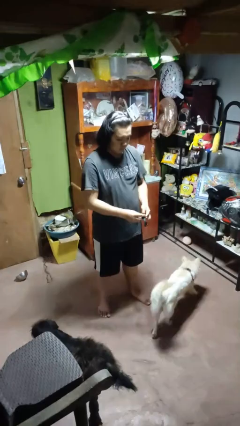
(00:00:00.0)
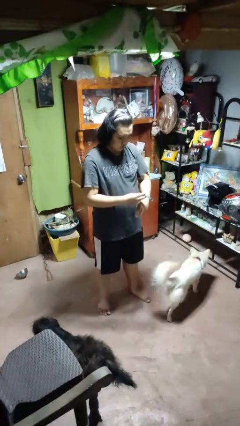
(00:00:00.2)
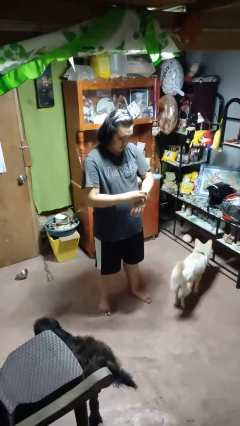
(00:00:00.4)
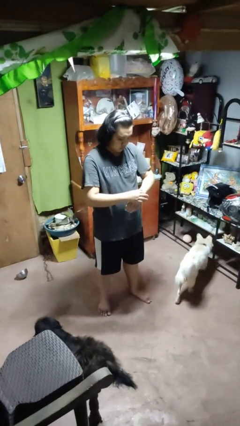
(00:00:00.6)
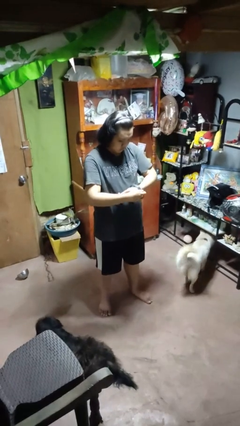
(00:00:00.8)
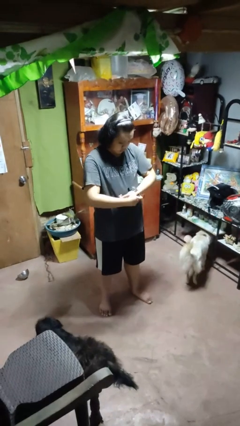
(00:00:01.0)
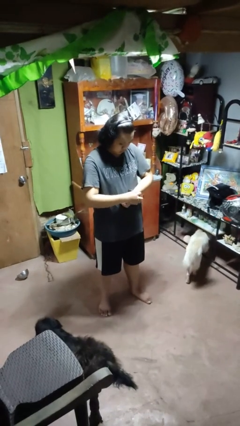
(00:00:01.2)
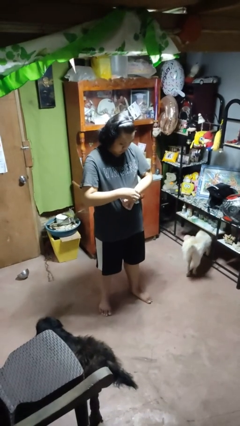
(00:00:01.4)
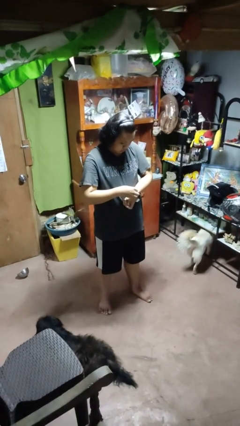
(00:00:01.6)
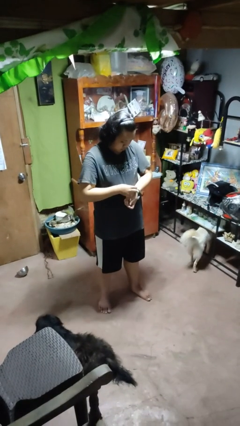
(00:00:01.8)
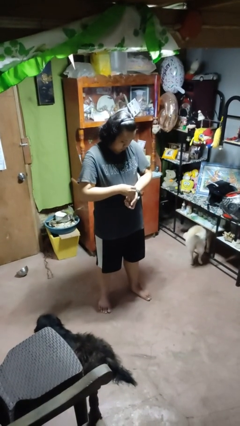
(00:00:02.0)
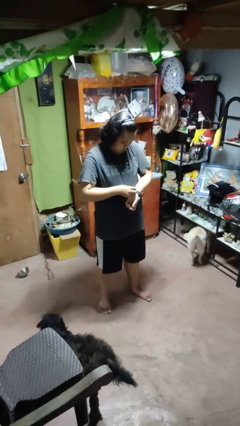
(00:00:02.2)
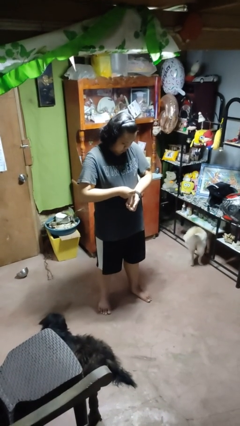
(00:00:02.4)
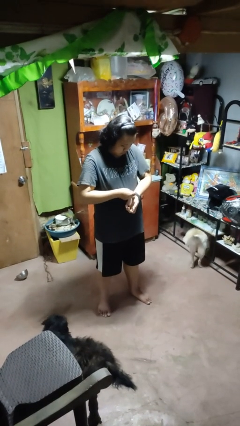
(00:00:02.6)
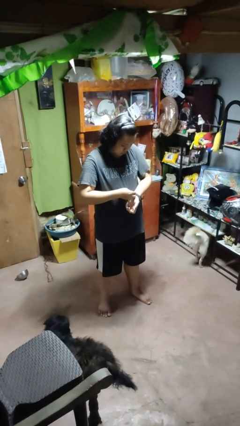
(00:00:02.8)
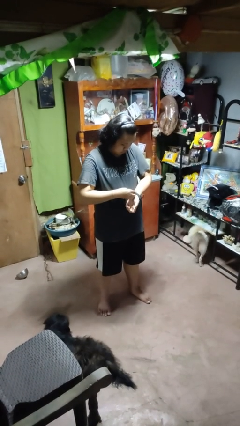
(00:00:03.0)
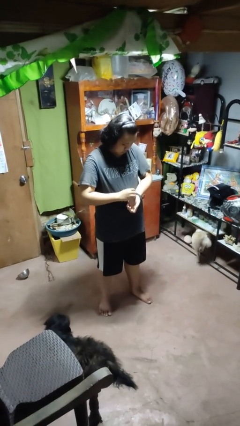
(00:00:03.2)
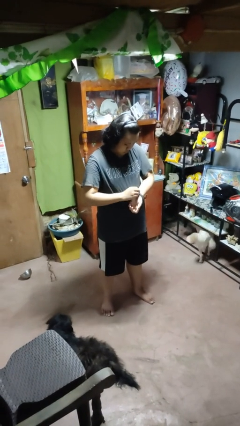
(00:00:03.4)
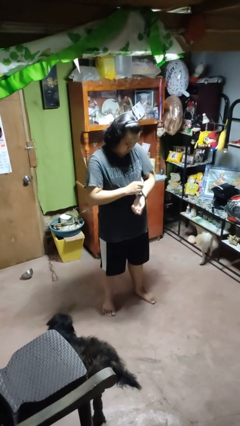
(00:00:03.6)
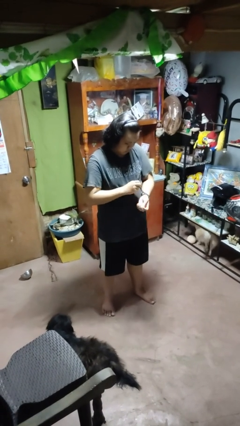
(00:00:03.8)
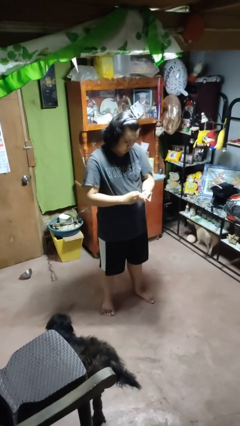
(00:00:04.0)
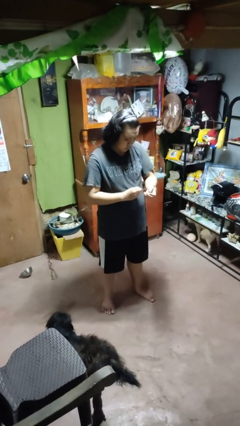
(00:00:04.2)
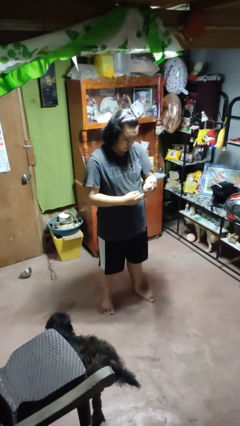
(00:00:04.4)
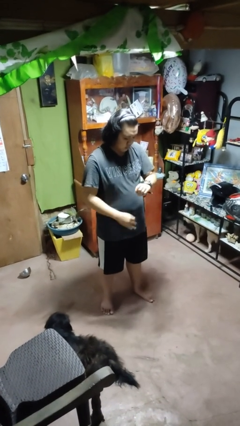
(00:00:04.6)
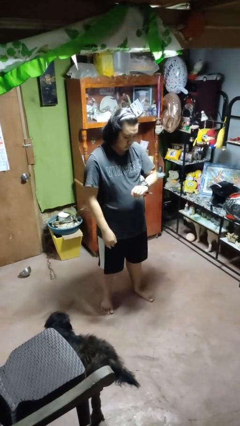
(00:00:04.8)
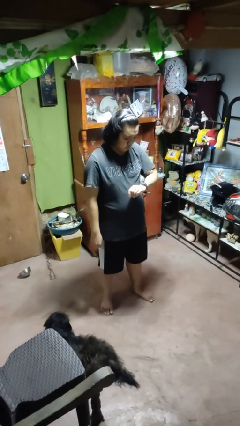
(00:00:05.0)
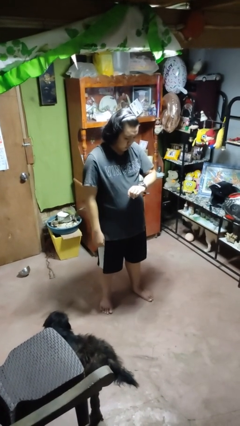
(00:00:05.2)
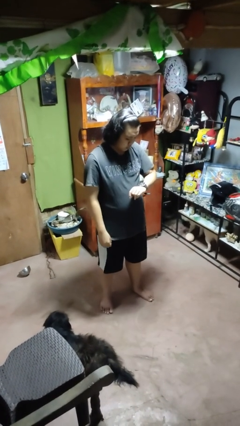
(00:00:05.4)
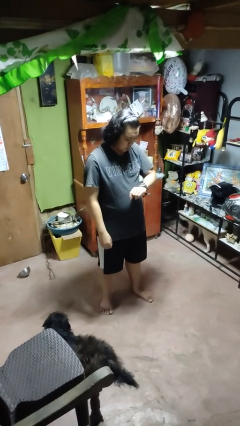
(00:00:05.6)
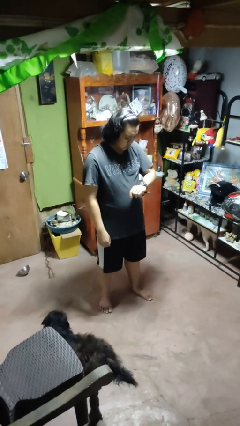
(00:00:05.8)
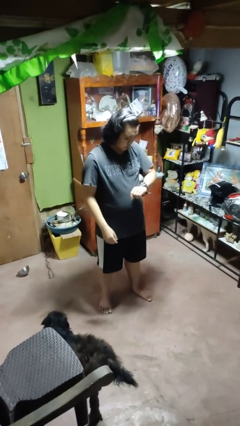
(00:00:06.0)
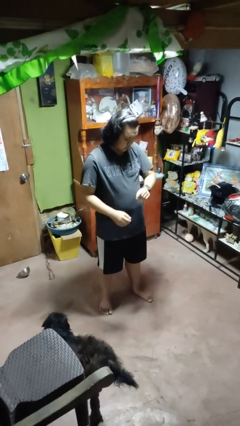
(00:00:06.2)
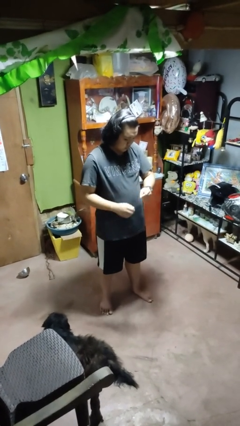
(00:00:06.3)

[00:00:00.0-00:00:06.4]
person puts on wristwatch

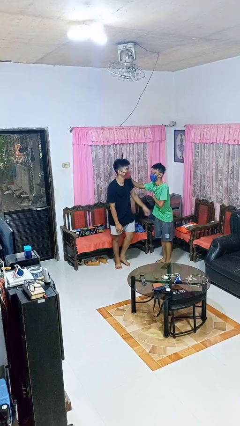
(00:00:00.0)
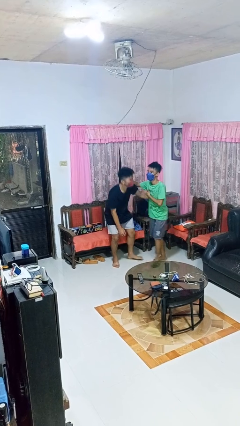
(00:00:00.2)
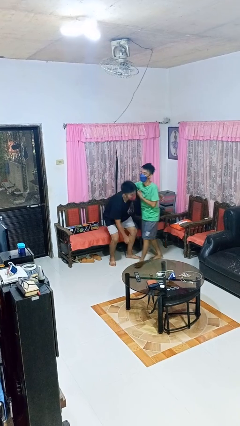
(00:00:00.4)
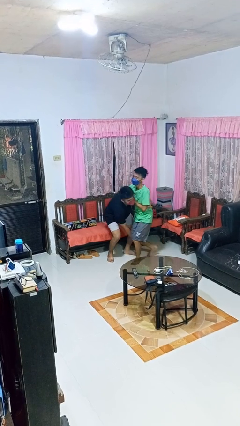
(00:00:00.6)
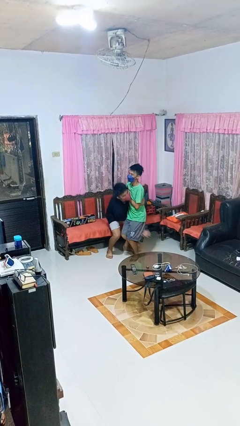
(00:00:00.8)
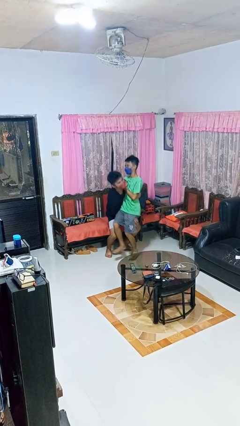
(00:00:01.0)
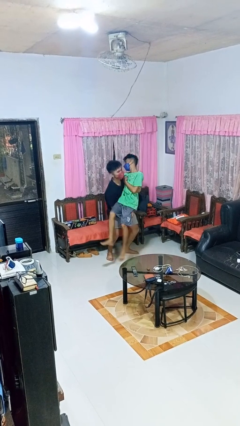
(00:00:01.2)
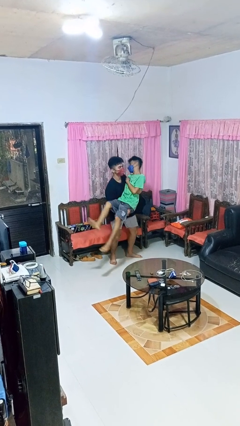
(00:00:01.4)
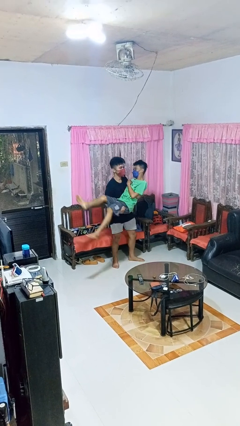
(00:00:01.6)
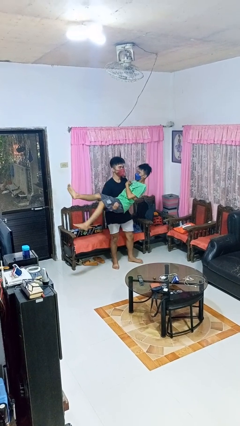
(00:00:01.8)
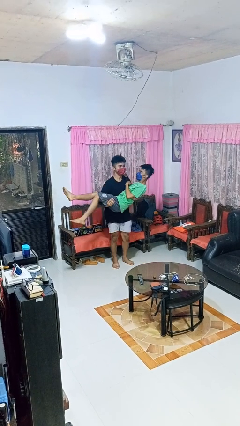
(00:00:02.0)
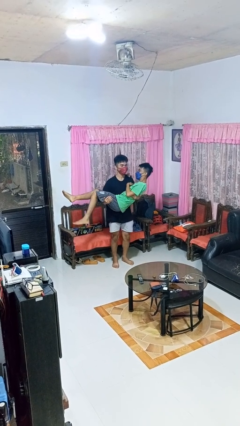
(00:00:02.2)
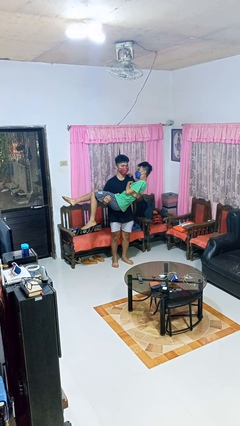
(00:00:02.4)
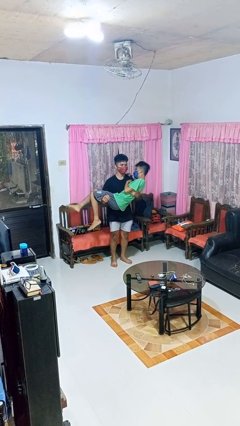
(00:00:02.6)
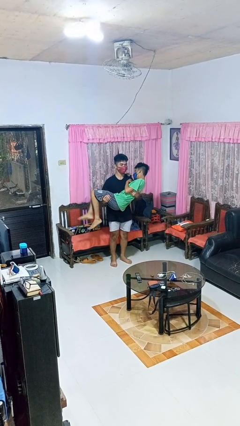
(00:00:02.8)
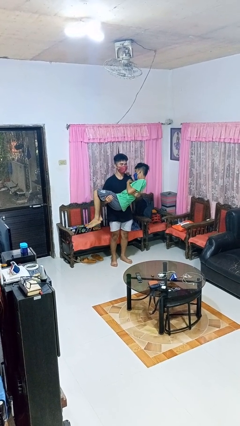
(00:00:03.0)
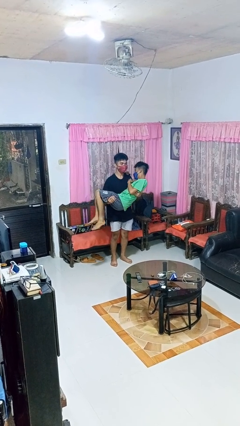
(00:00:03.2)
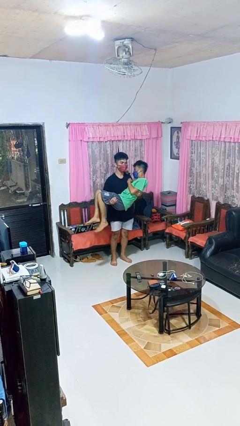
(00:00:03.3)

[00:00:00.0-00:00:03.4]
person picks up person

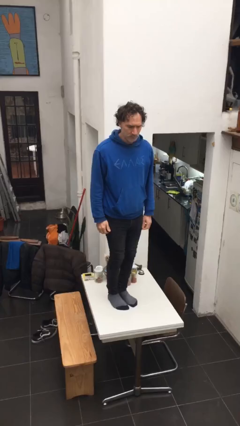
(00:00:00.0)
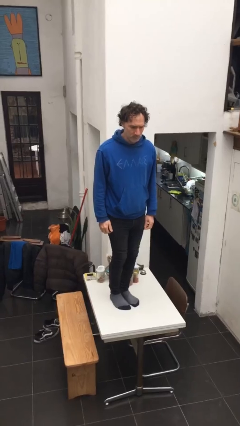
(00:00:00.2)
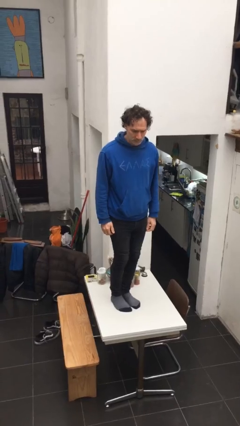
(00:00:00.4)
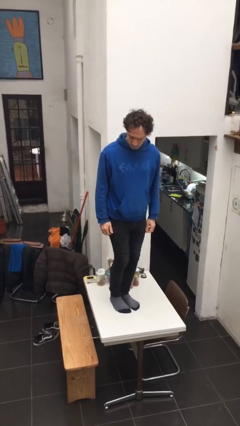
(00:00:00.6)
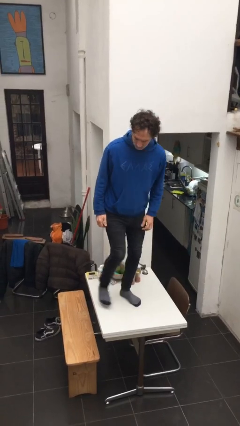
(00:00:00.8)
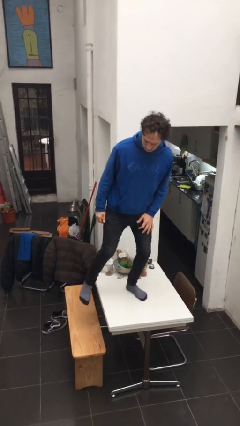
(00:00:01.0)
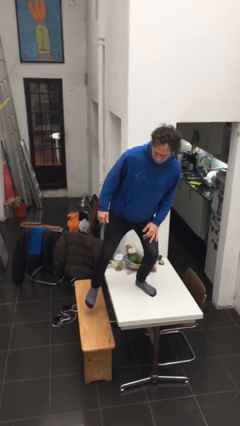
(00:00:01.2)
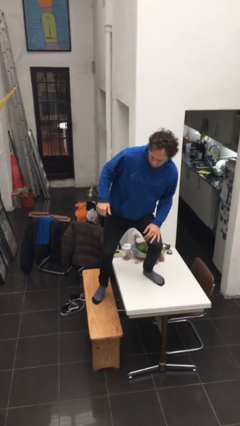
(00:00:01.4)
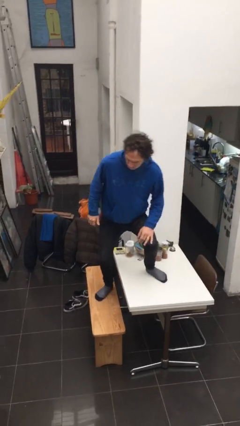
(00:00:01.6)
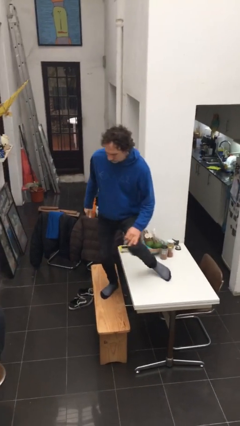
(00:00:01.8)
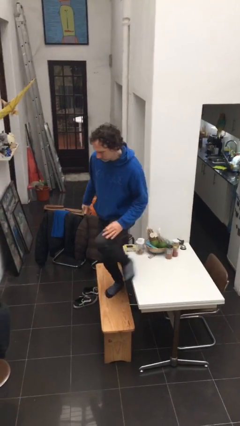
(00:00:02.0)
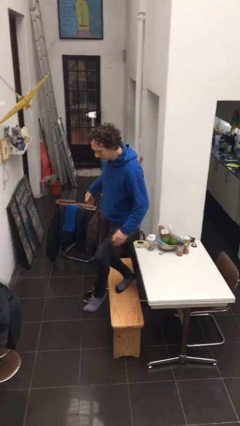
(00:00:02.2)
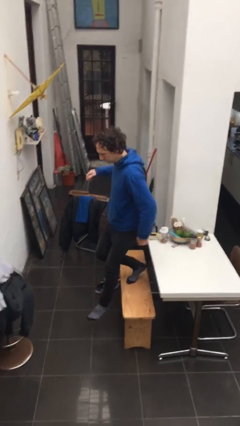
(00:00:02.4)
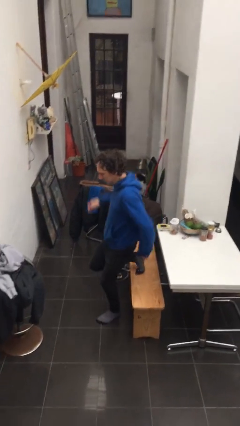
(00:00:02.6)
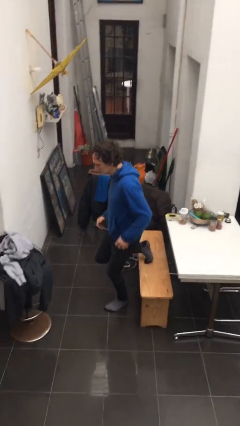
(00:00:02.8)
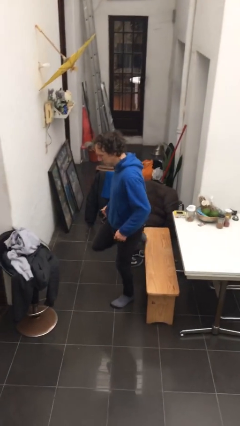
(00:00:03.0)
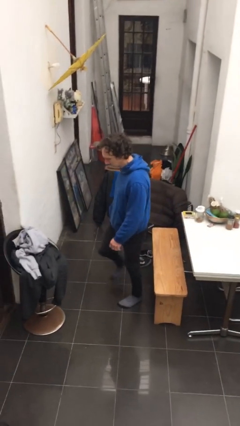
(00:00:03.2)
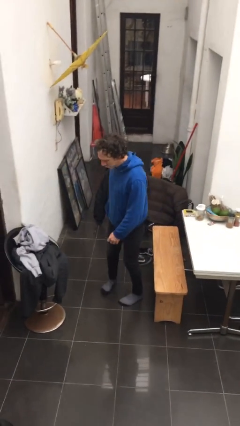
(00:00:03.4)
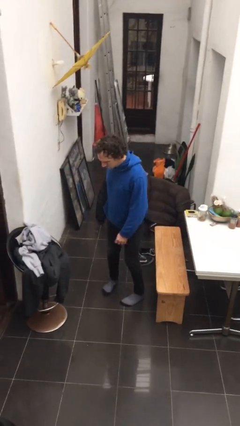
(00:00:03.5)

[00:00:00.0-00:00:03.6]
person climbs off table

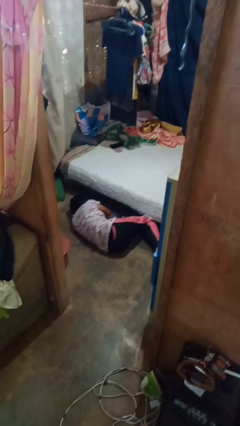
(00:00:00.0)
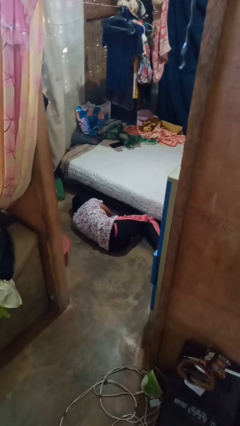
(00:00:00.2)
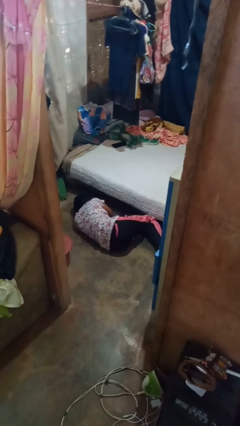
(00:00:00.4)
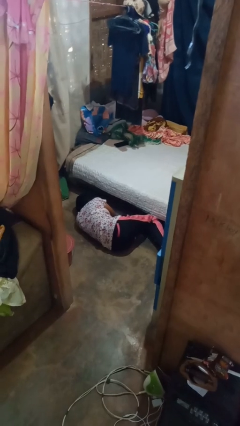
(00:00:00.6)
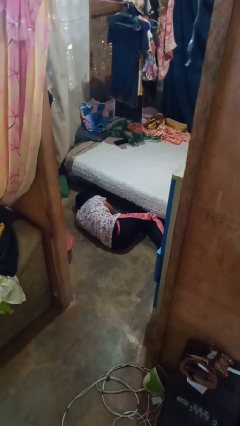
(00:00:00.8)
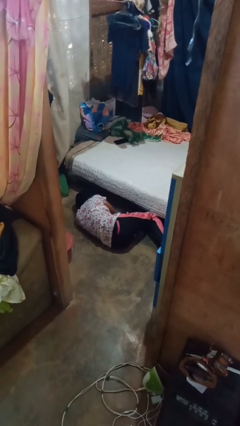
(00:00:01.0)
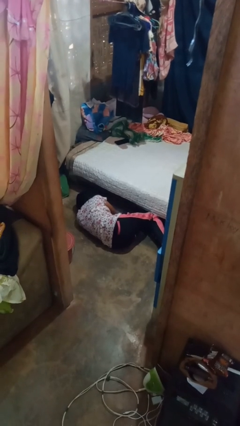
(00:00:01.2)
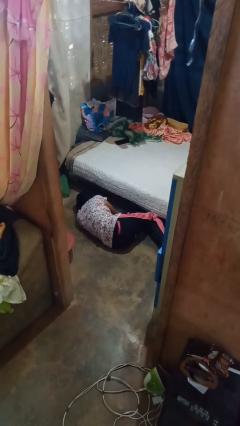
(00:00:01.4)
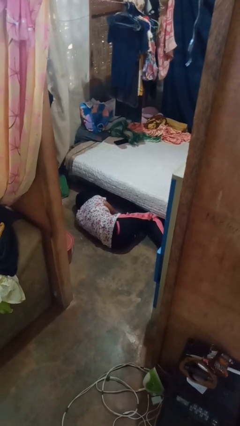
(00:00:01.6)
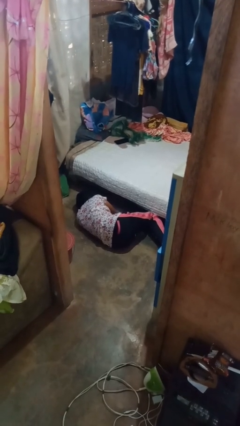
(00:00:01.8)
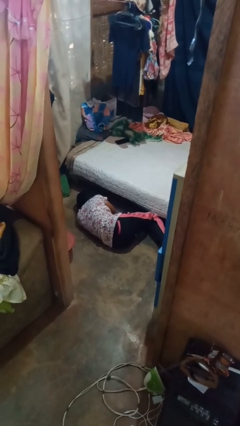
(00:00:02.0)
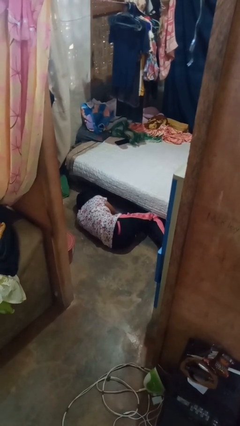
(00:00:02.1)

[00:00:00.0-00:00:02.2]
person falls from bed

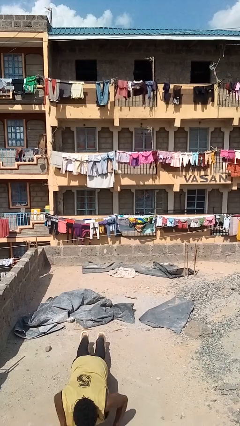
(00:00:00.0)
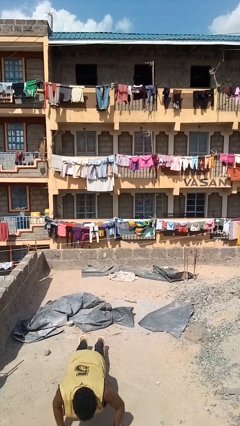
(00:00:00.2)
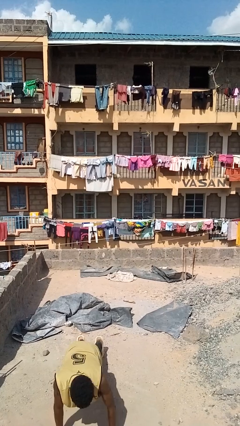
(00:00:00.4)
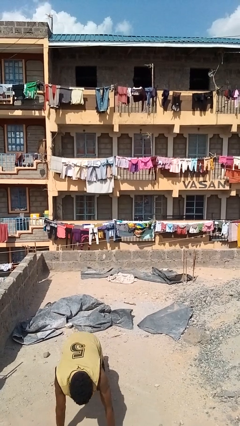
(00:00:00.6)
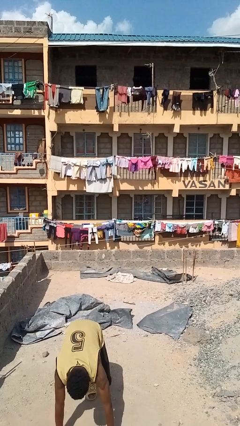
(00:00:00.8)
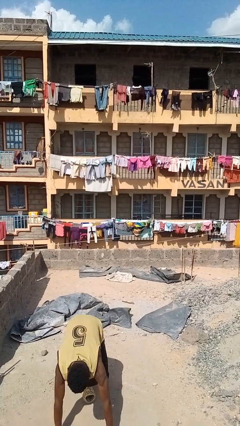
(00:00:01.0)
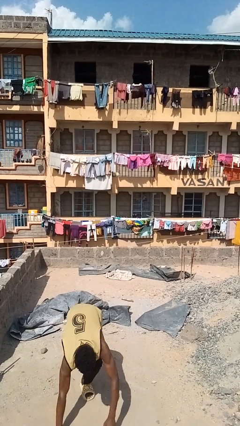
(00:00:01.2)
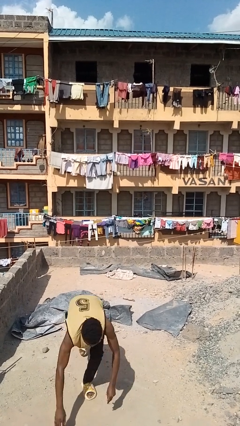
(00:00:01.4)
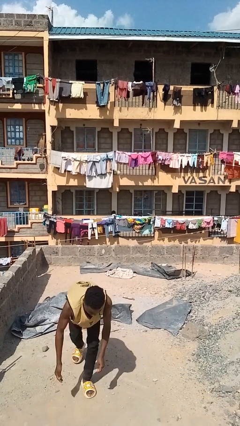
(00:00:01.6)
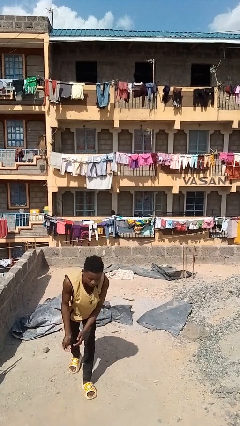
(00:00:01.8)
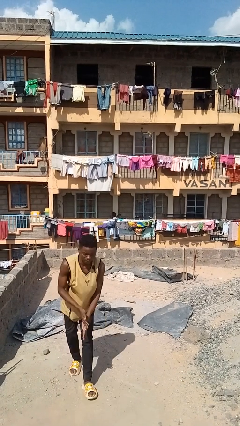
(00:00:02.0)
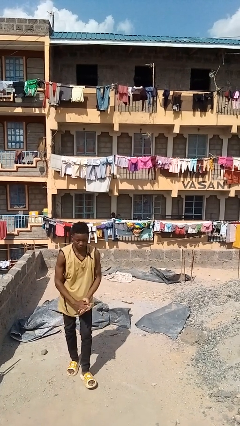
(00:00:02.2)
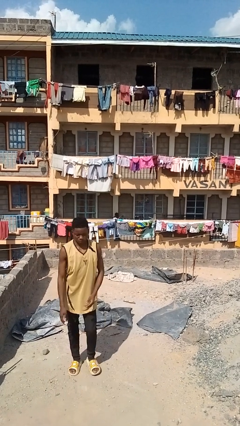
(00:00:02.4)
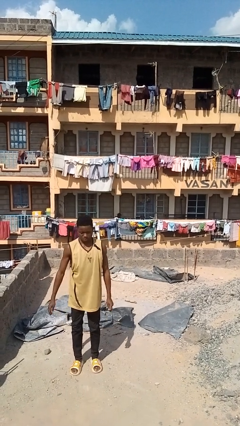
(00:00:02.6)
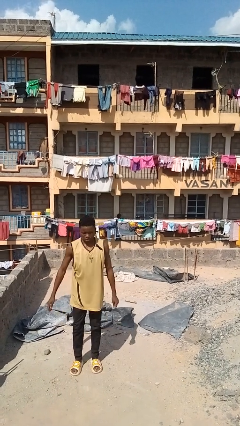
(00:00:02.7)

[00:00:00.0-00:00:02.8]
person stands up from floor
